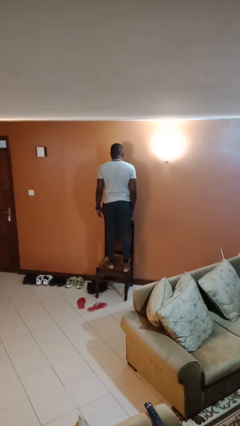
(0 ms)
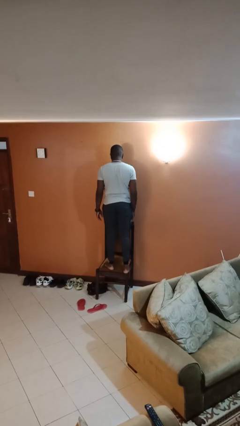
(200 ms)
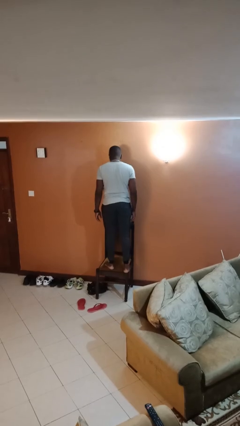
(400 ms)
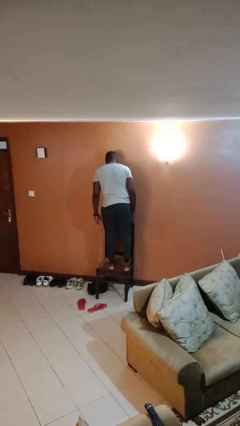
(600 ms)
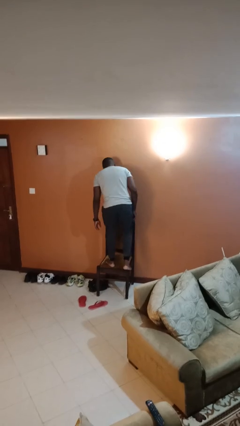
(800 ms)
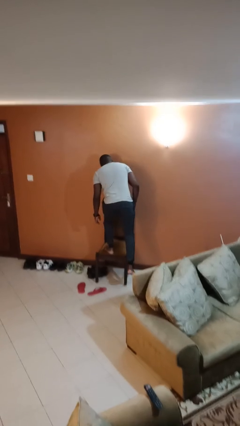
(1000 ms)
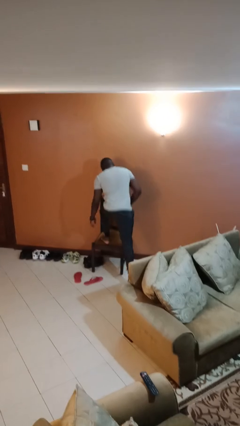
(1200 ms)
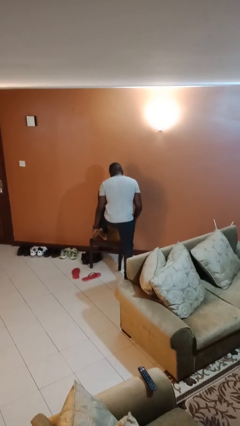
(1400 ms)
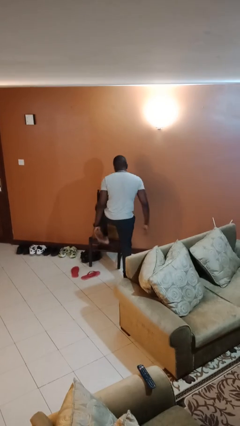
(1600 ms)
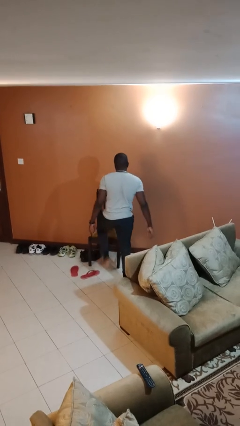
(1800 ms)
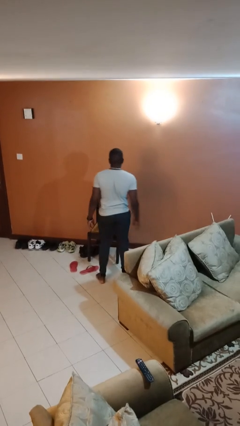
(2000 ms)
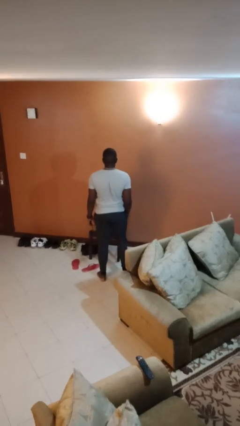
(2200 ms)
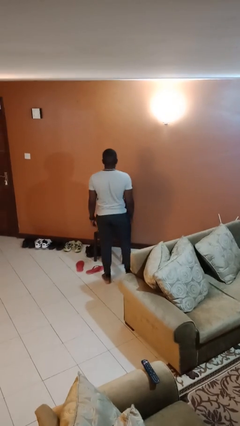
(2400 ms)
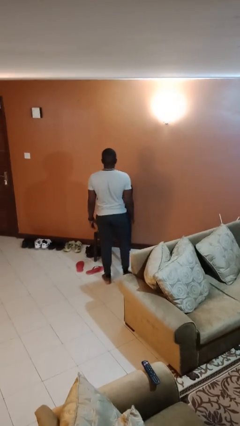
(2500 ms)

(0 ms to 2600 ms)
person climbs off chair

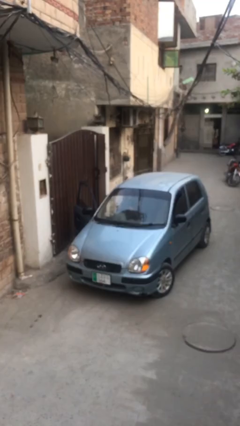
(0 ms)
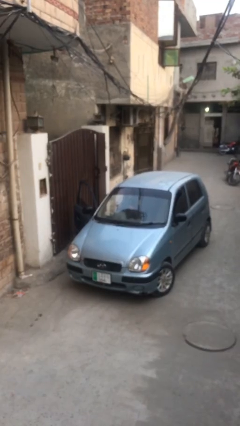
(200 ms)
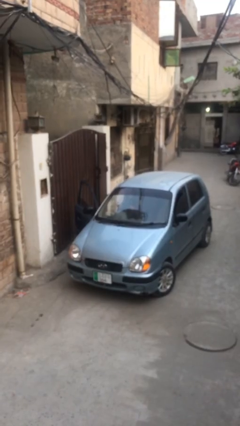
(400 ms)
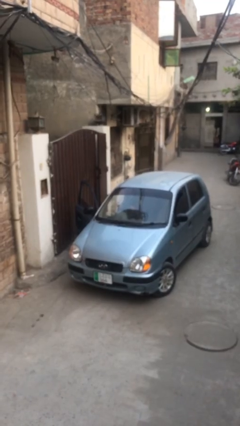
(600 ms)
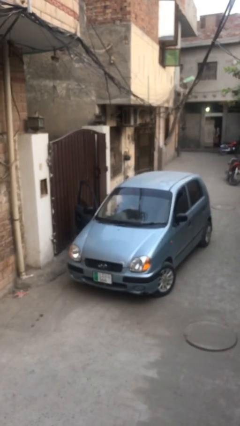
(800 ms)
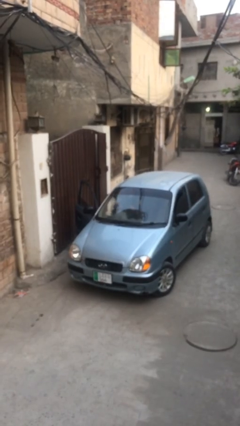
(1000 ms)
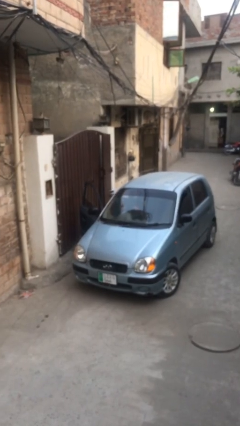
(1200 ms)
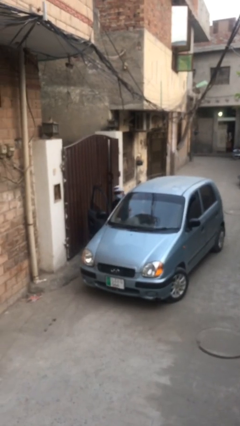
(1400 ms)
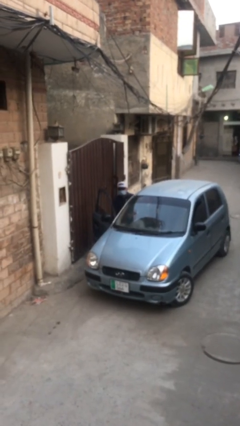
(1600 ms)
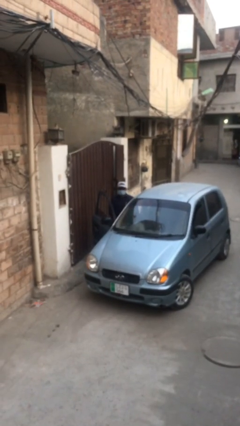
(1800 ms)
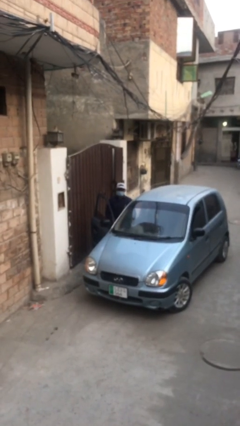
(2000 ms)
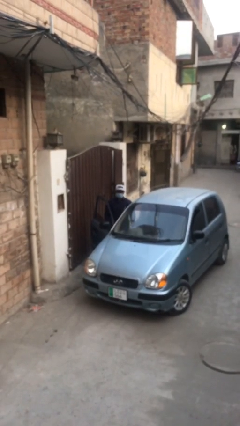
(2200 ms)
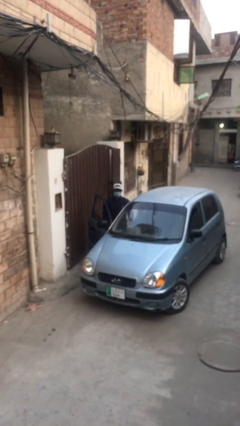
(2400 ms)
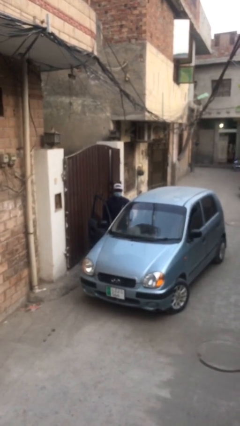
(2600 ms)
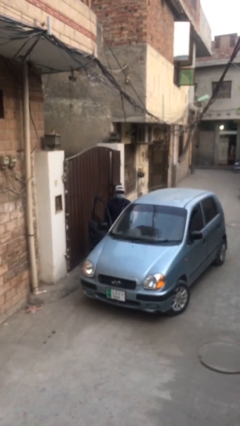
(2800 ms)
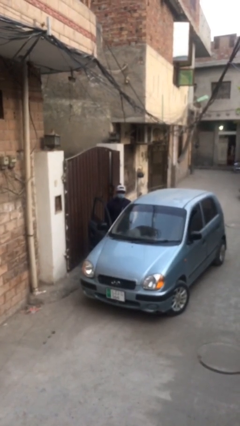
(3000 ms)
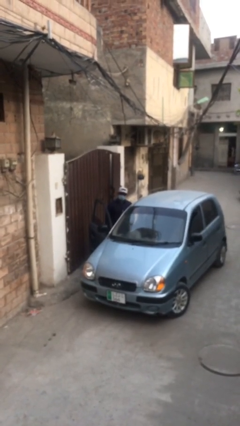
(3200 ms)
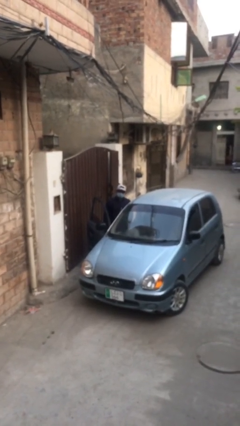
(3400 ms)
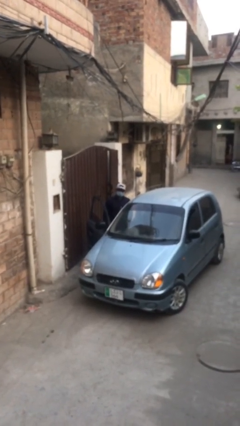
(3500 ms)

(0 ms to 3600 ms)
person exits car

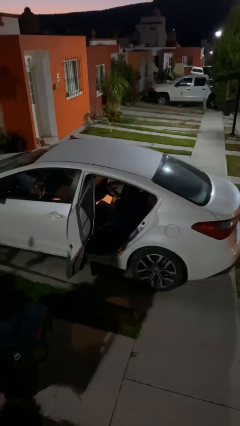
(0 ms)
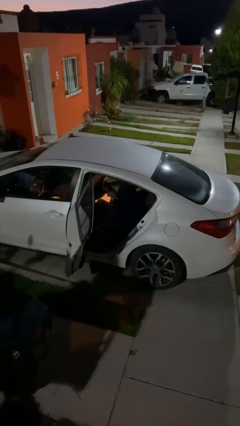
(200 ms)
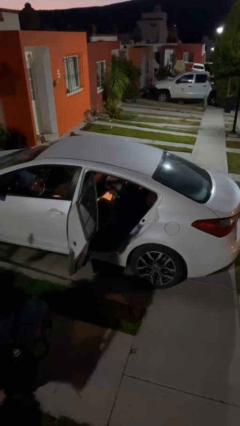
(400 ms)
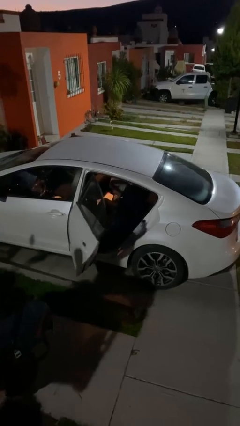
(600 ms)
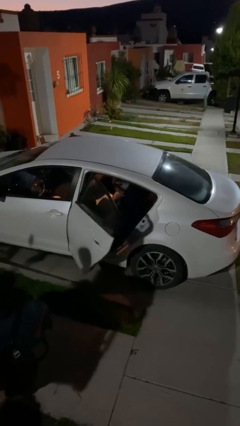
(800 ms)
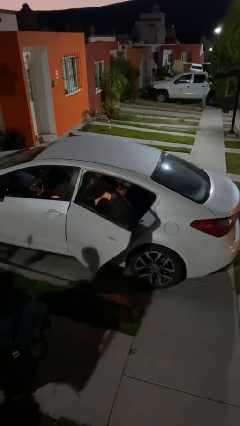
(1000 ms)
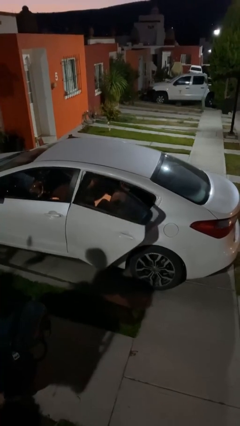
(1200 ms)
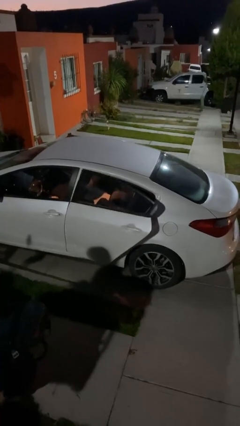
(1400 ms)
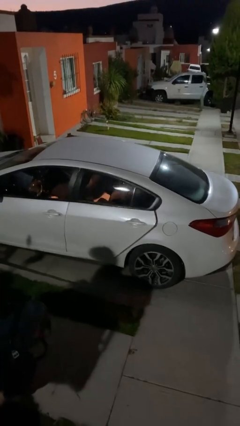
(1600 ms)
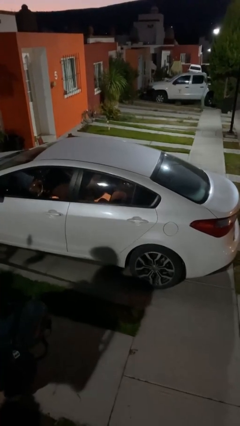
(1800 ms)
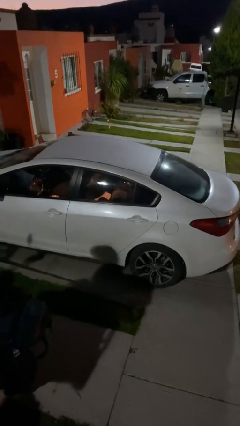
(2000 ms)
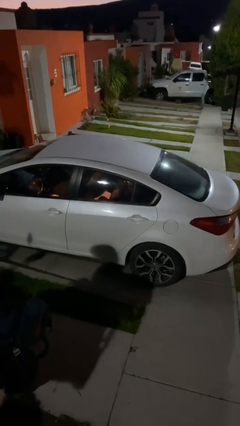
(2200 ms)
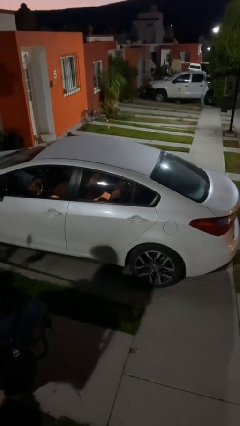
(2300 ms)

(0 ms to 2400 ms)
person closes car door

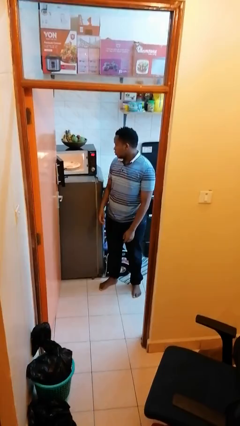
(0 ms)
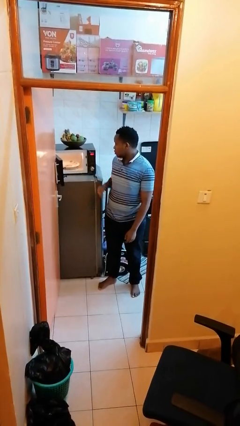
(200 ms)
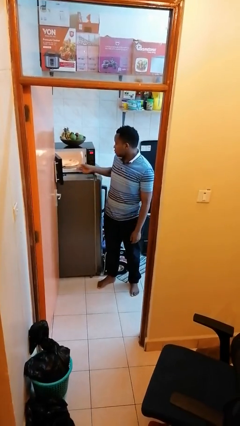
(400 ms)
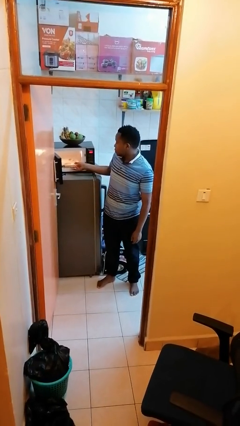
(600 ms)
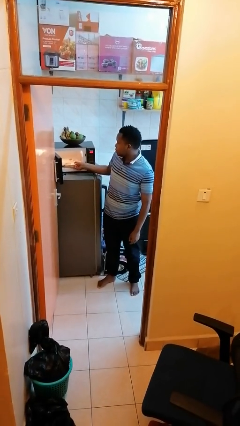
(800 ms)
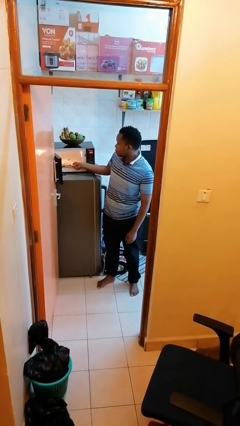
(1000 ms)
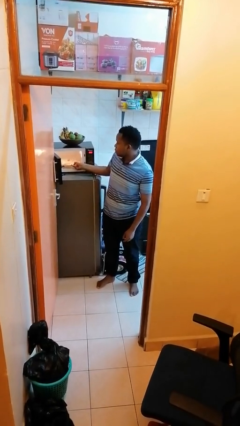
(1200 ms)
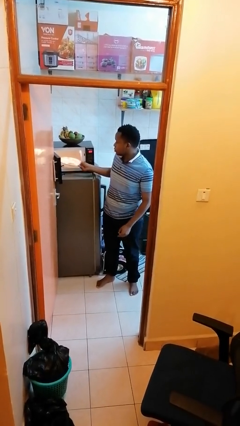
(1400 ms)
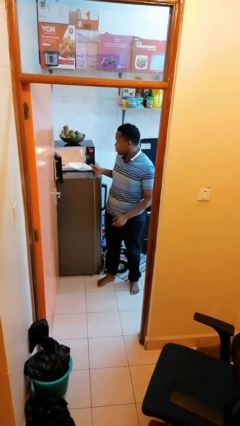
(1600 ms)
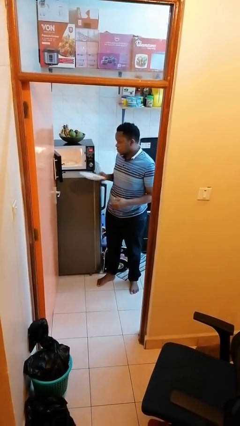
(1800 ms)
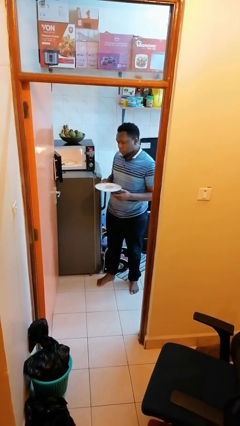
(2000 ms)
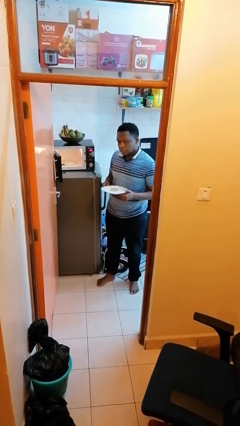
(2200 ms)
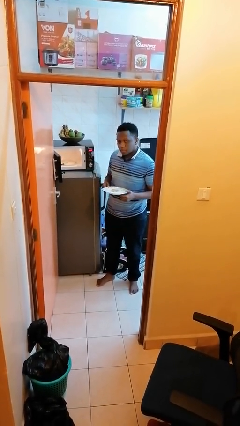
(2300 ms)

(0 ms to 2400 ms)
person takes object from microwave

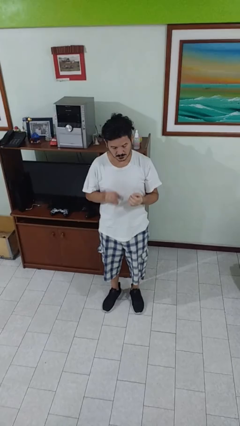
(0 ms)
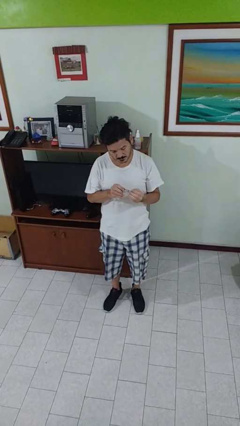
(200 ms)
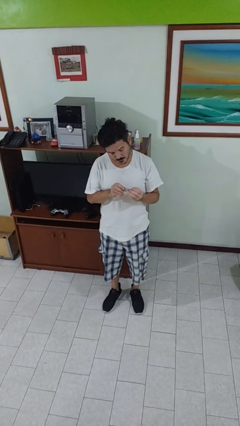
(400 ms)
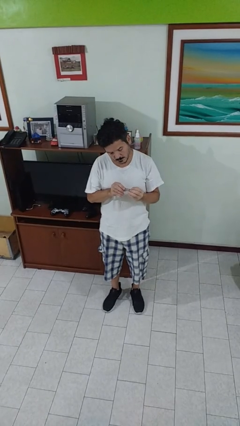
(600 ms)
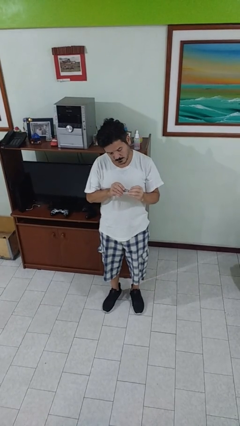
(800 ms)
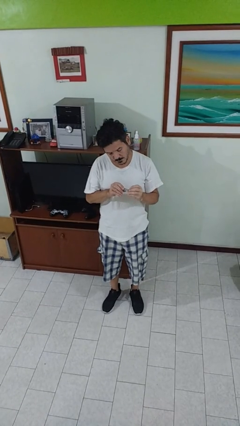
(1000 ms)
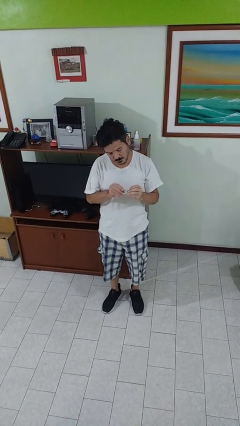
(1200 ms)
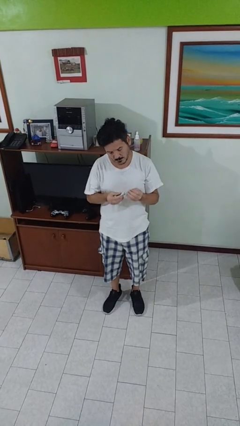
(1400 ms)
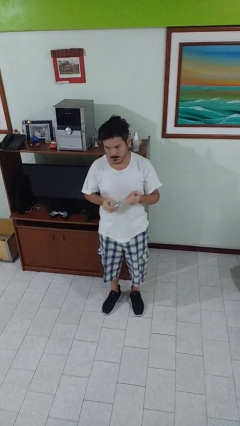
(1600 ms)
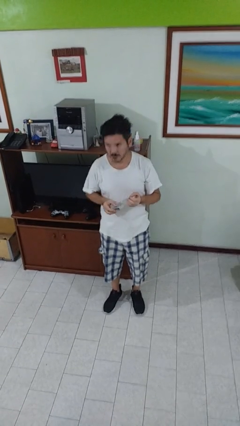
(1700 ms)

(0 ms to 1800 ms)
person clips fingernails

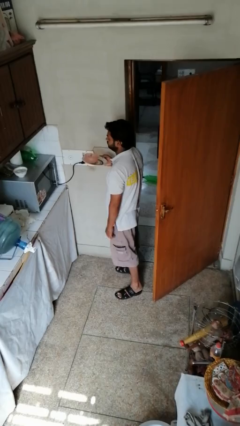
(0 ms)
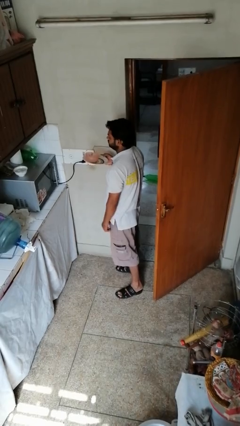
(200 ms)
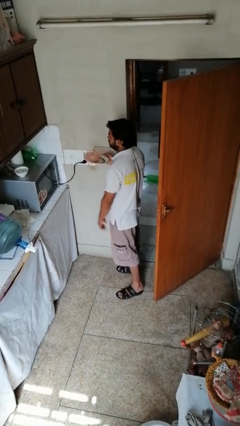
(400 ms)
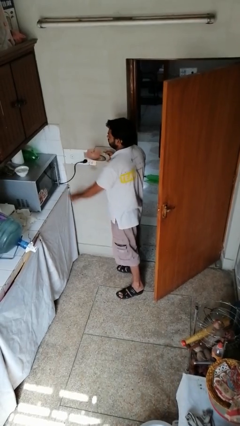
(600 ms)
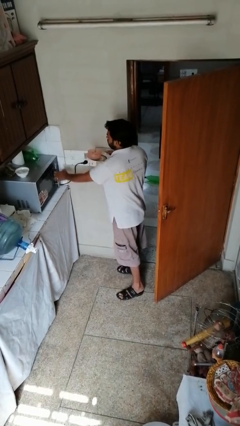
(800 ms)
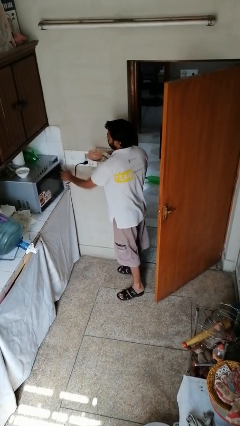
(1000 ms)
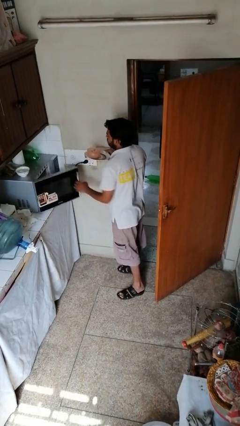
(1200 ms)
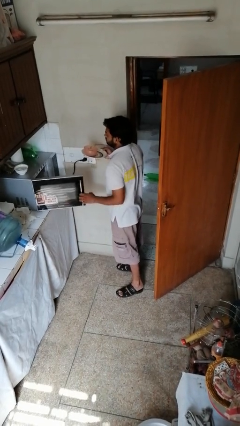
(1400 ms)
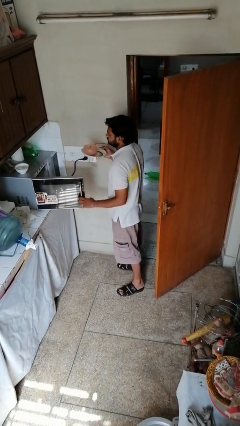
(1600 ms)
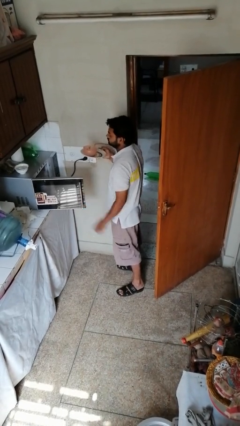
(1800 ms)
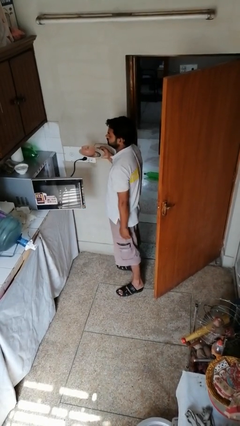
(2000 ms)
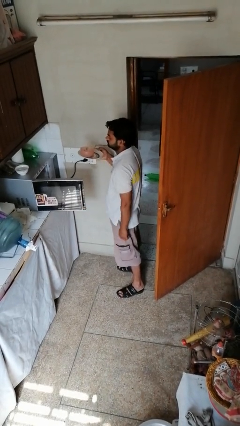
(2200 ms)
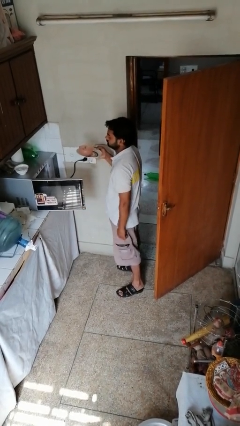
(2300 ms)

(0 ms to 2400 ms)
person opens microwave

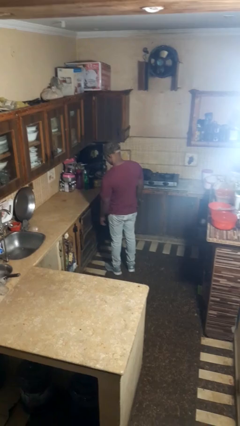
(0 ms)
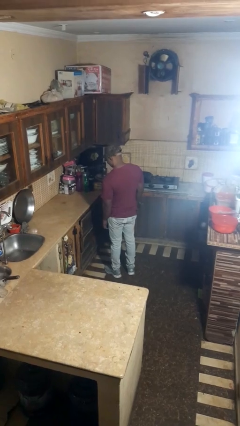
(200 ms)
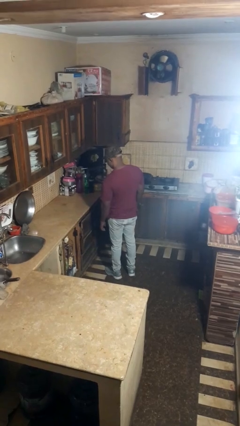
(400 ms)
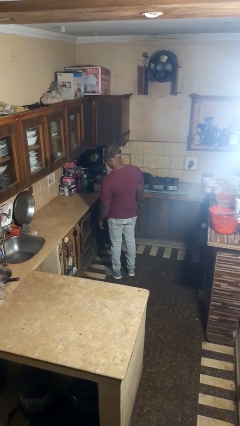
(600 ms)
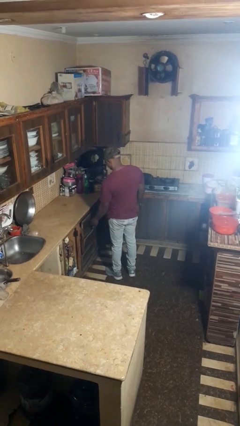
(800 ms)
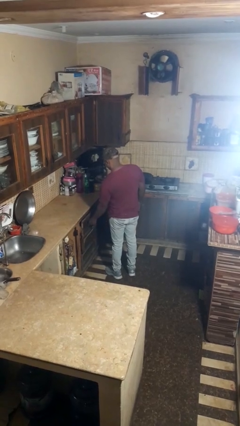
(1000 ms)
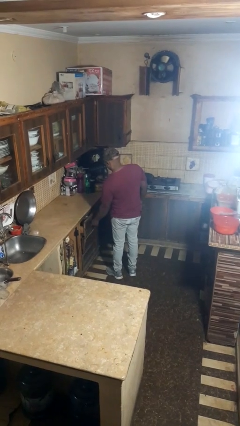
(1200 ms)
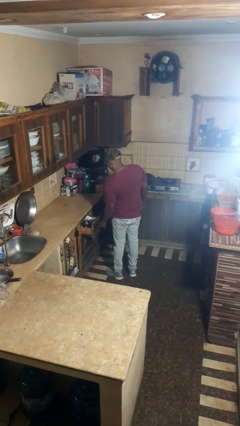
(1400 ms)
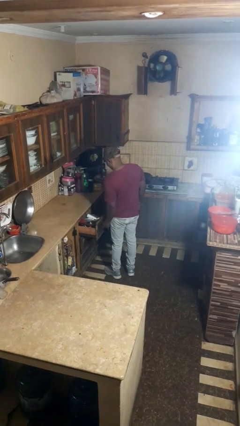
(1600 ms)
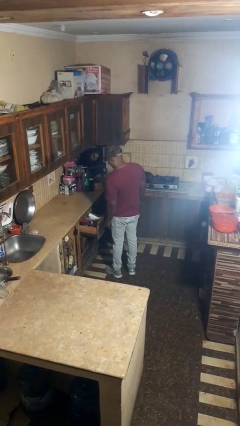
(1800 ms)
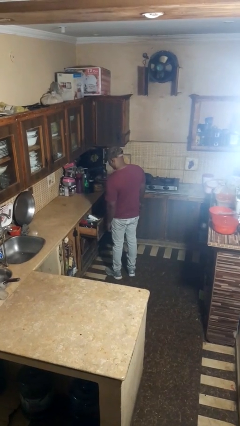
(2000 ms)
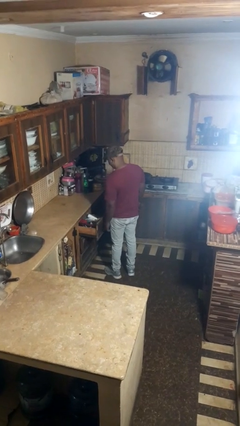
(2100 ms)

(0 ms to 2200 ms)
person opens kitchen drawer
